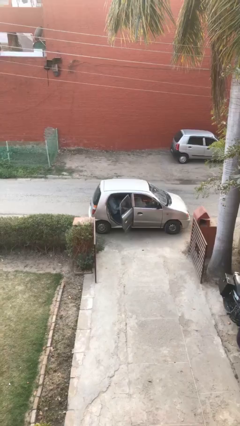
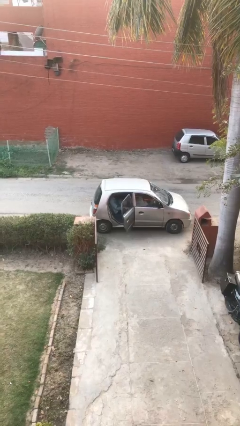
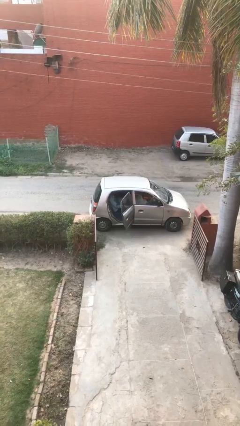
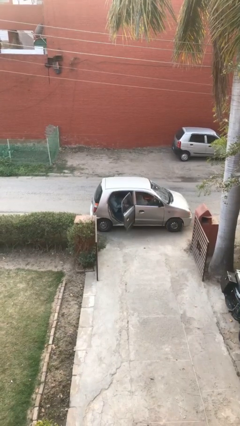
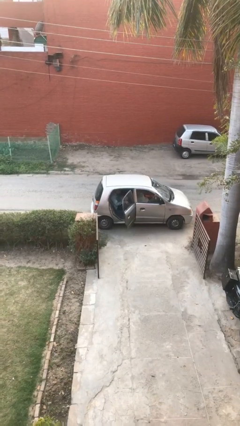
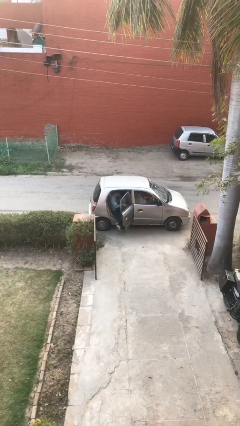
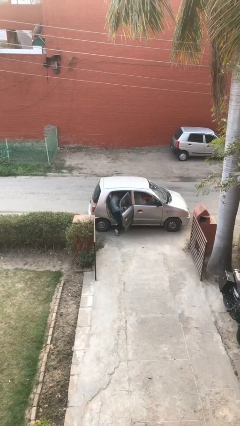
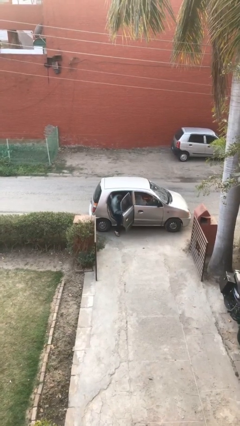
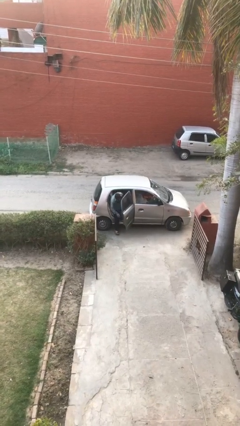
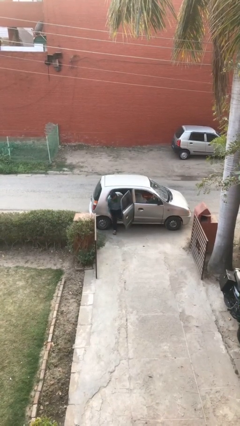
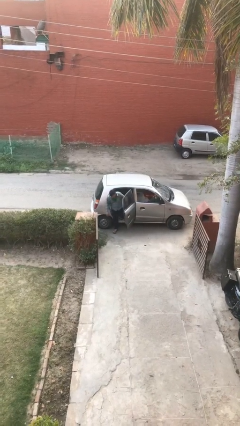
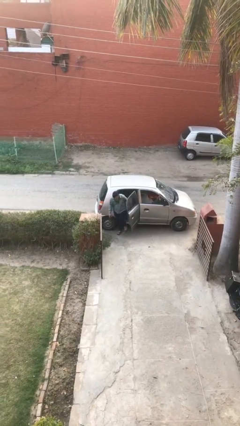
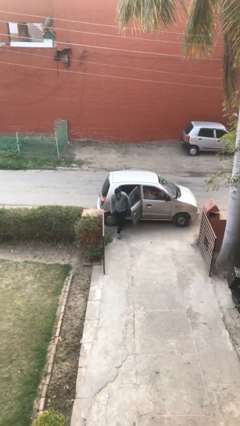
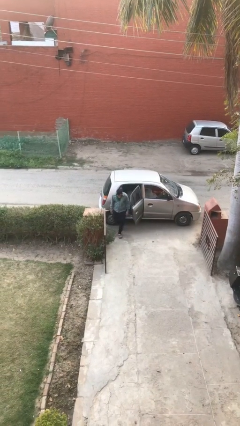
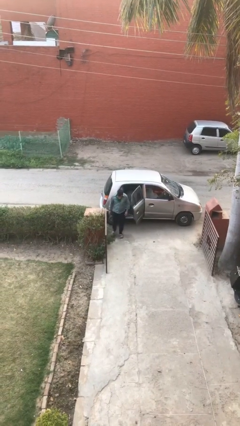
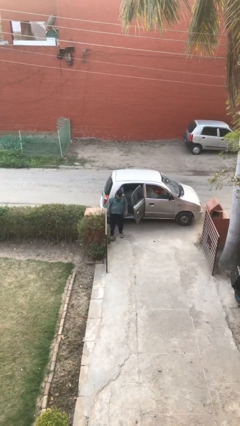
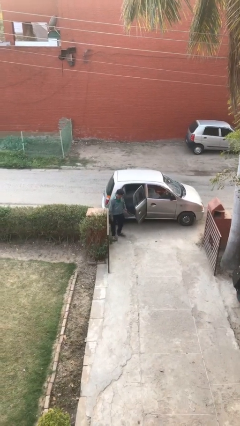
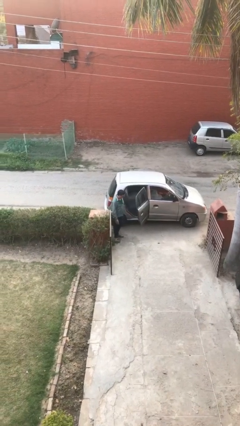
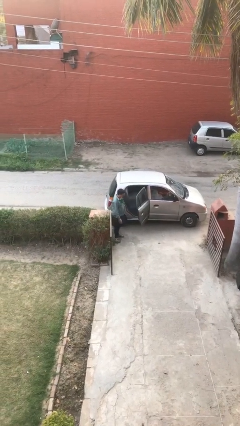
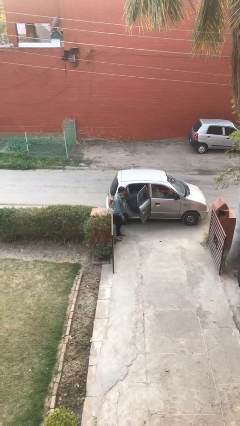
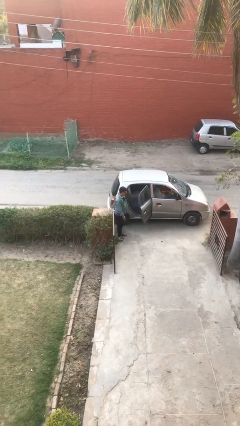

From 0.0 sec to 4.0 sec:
person exits car

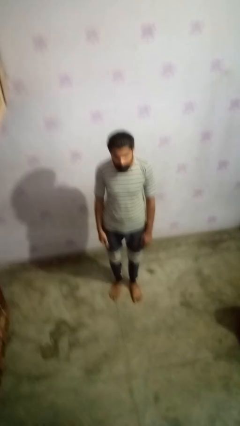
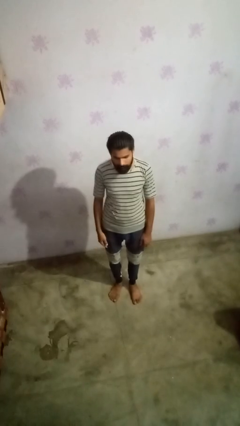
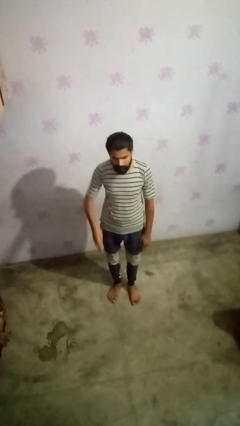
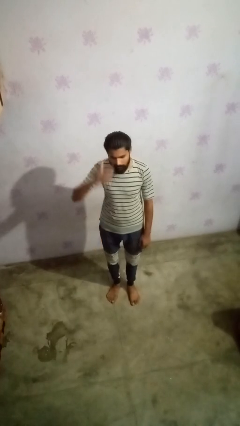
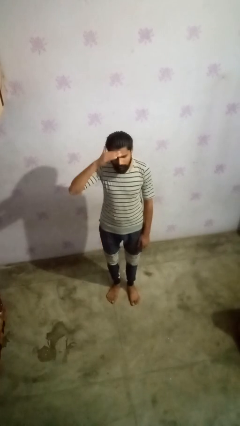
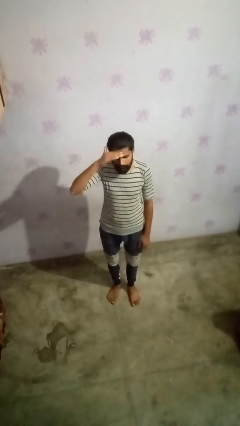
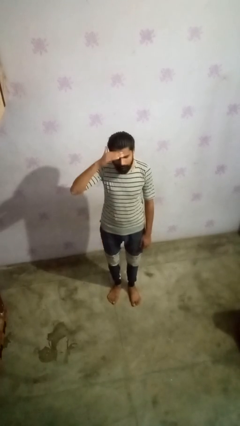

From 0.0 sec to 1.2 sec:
person salutes

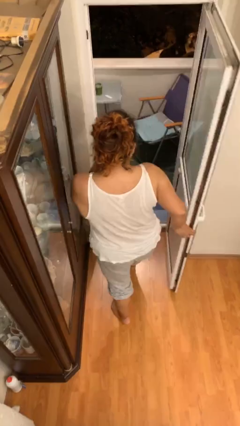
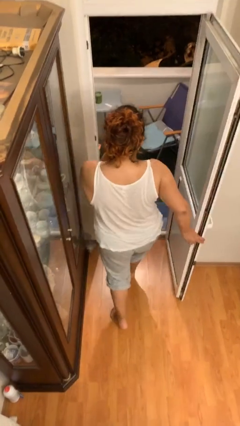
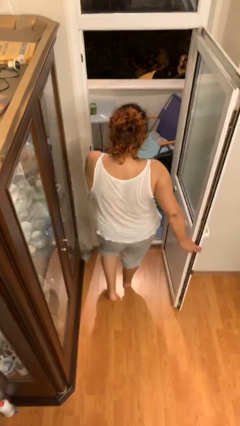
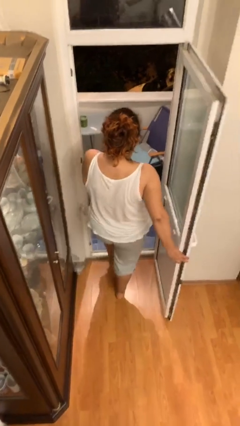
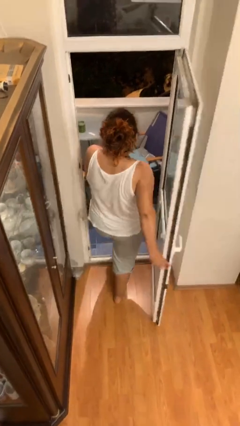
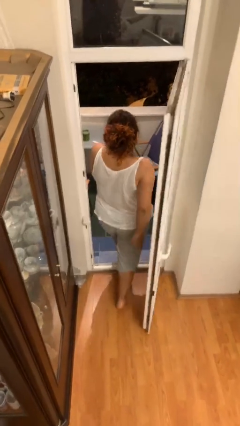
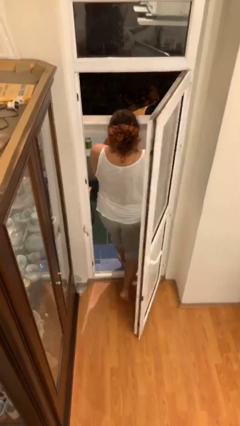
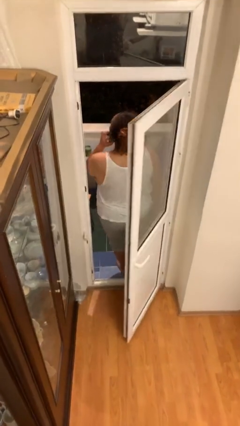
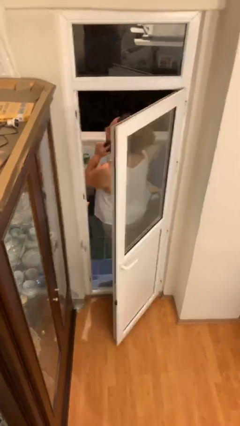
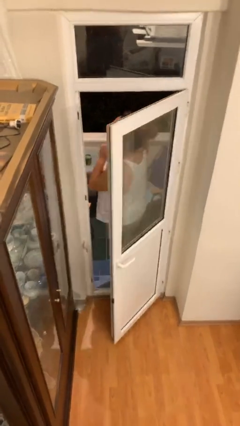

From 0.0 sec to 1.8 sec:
person exits scene through structure

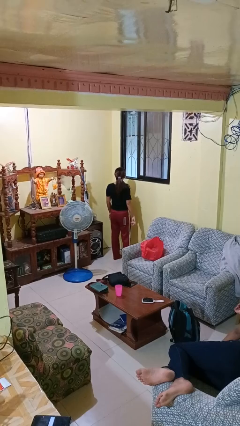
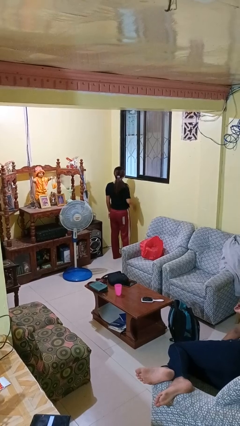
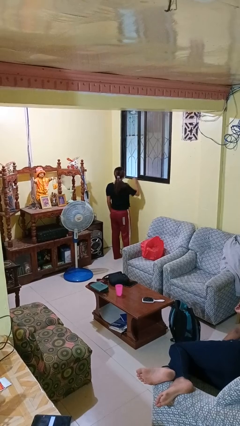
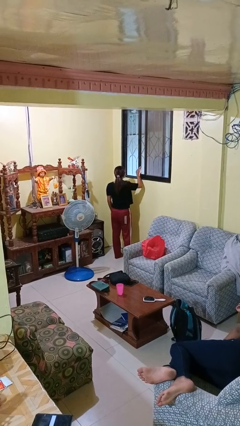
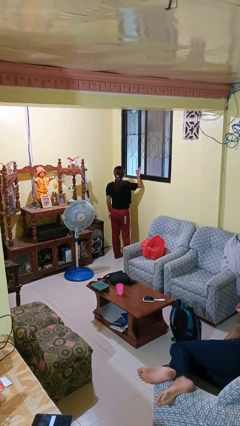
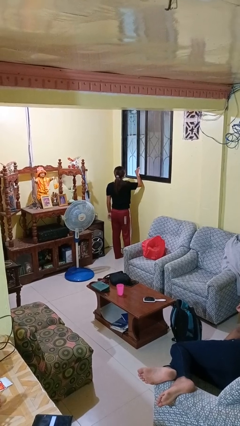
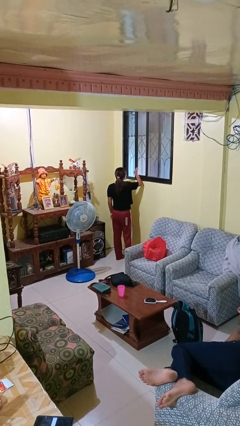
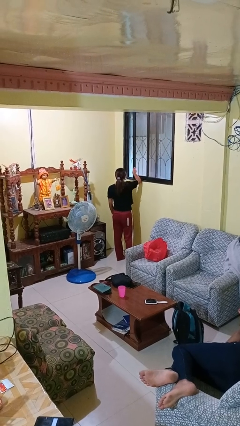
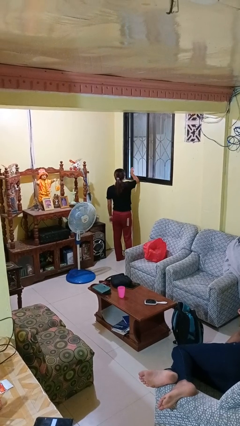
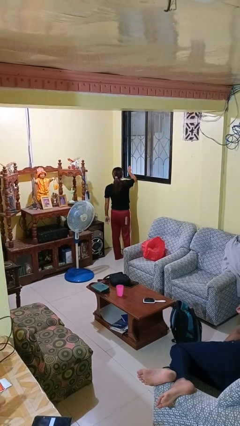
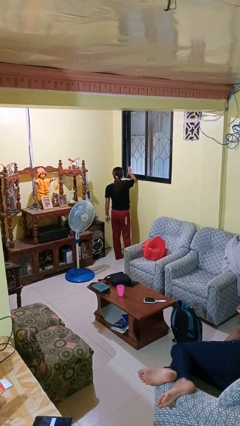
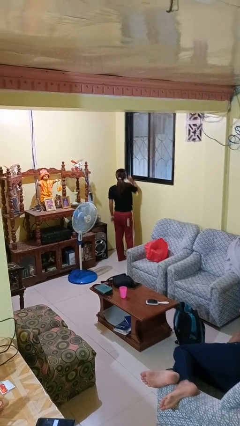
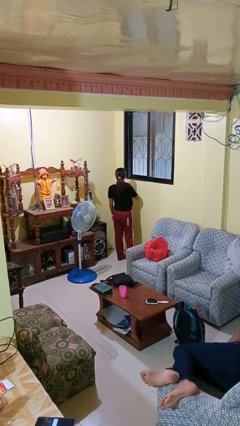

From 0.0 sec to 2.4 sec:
person closes home window

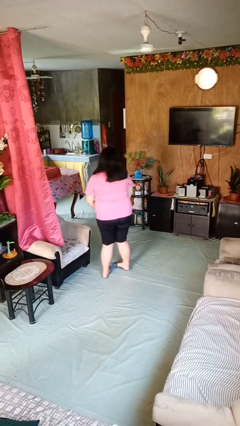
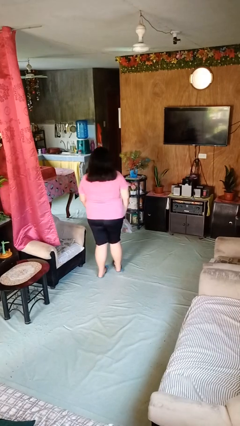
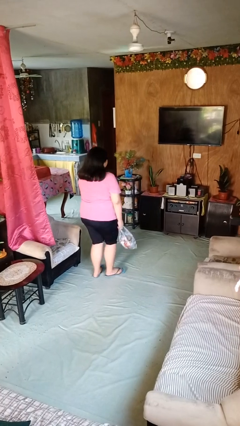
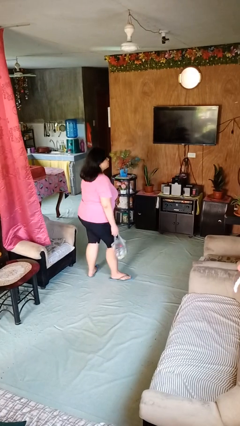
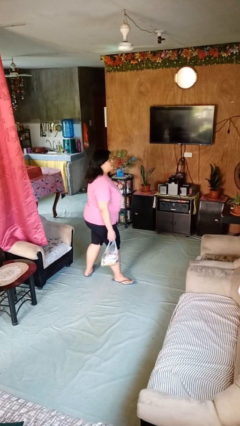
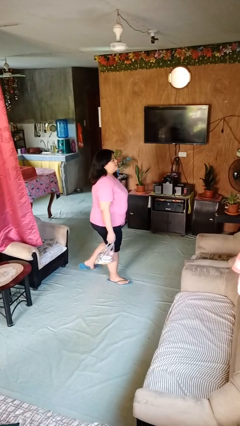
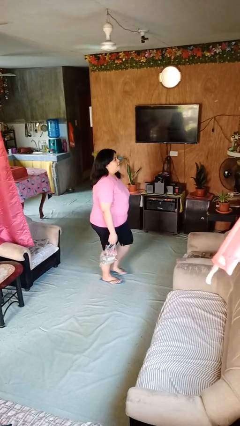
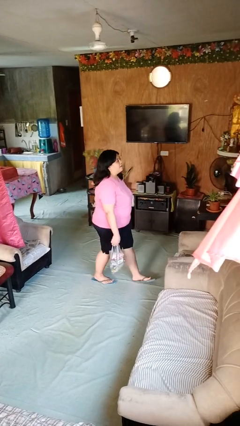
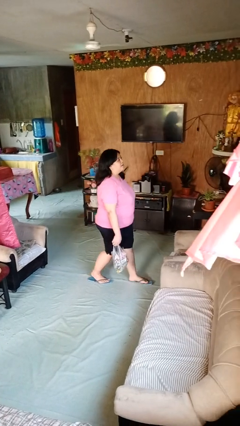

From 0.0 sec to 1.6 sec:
person carries groceries

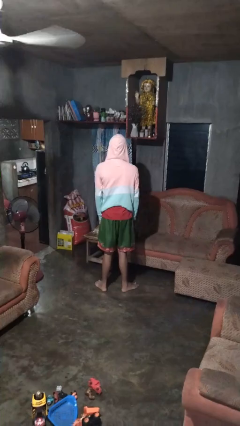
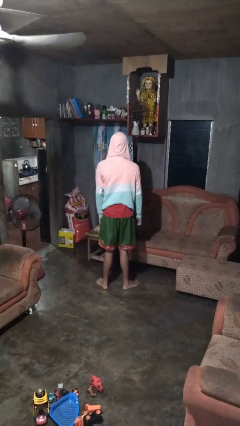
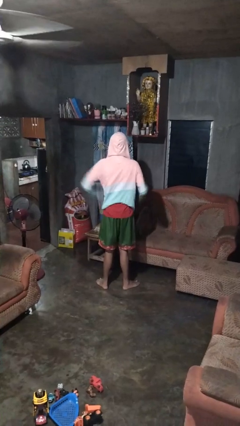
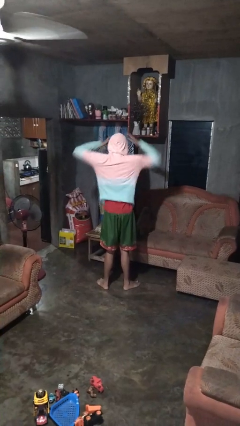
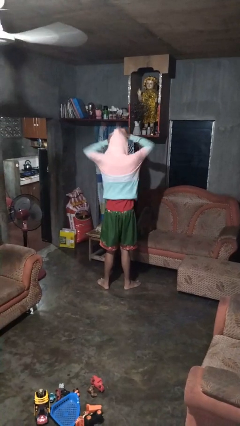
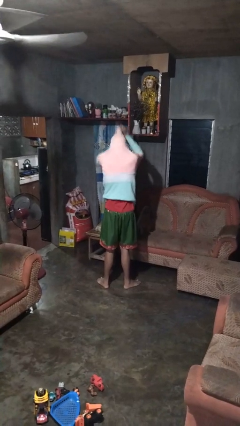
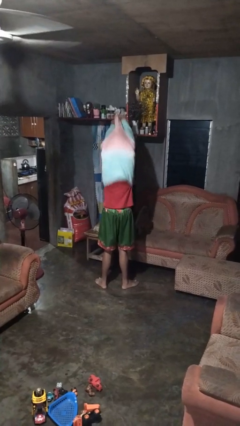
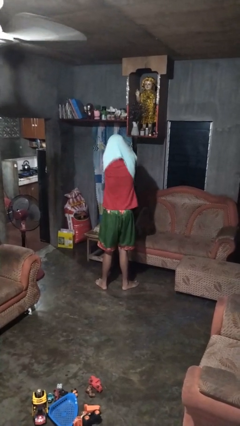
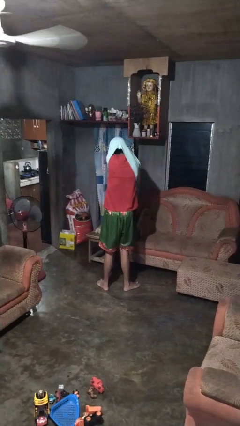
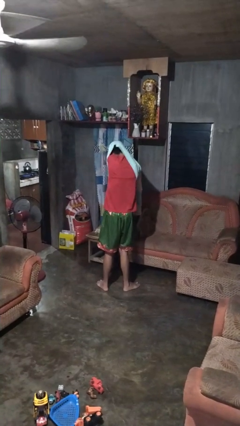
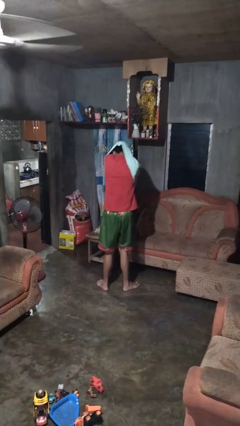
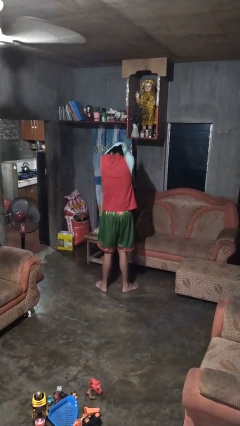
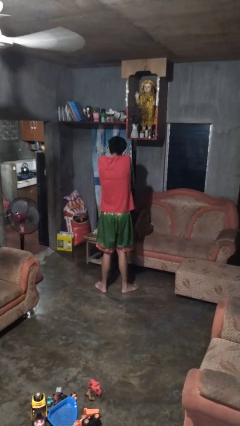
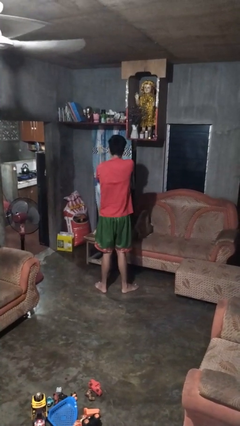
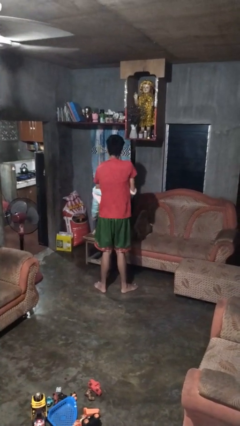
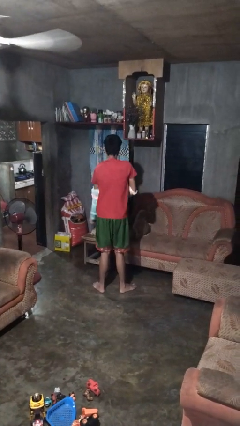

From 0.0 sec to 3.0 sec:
person takes off hoodie

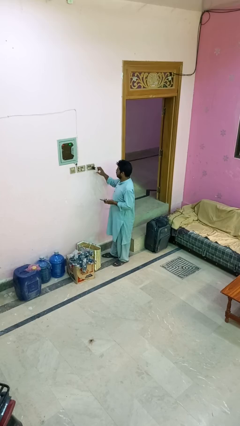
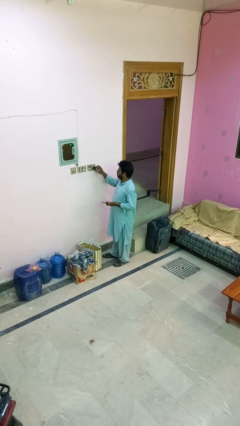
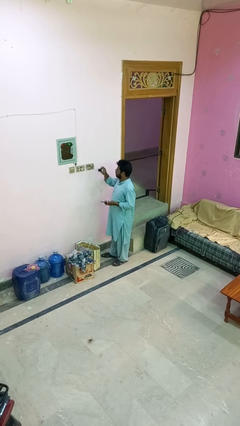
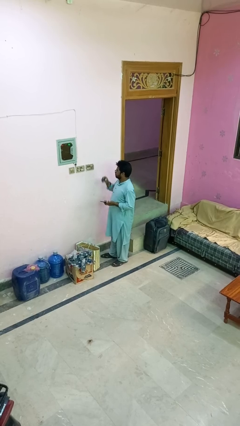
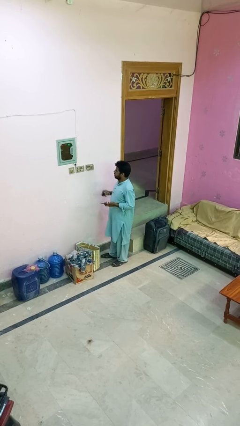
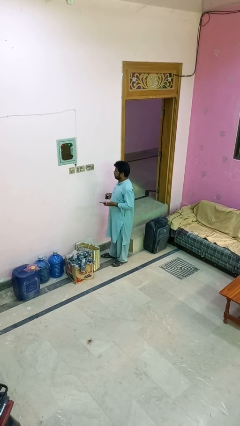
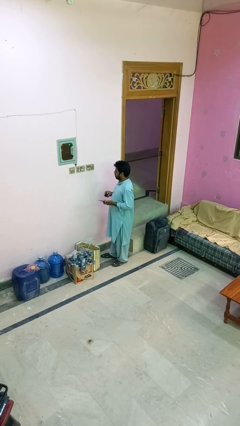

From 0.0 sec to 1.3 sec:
person unplugs from electrical socket

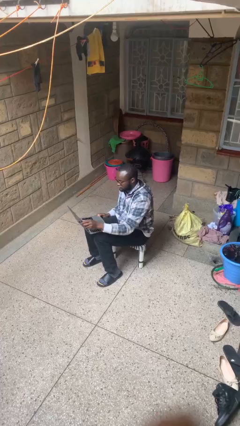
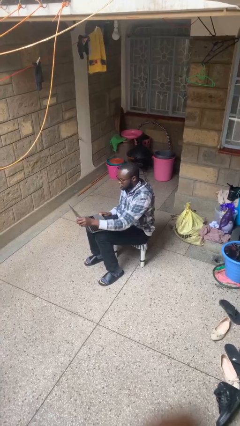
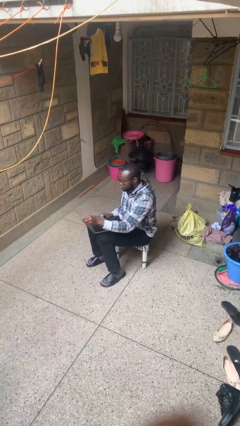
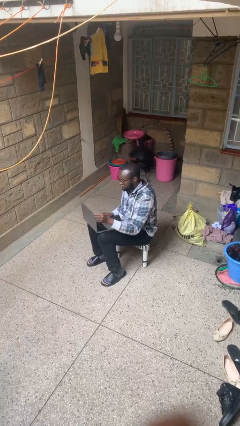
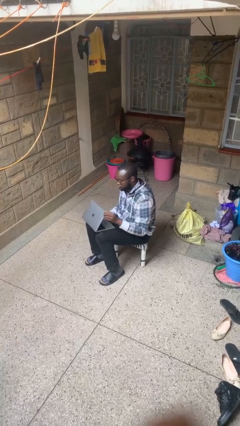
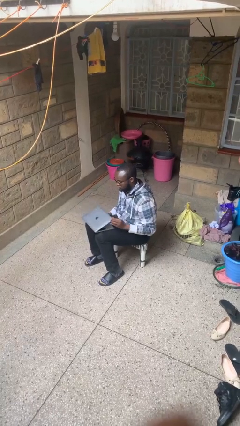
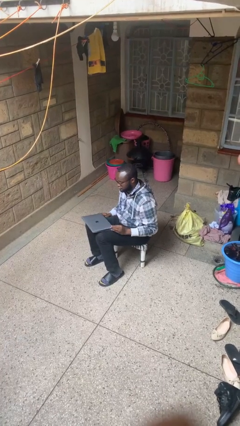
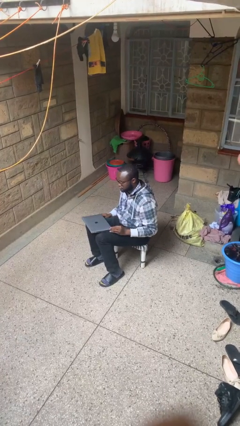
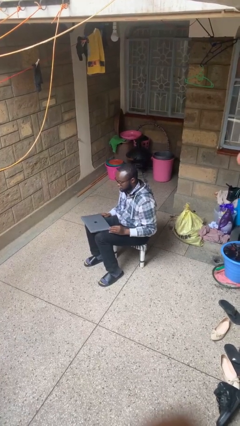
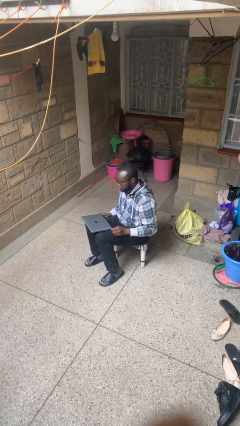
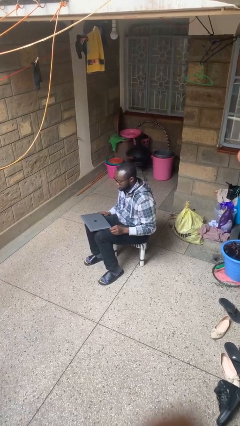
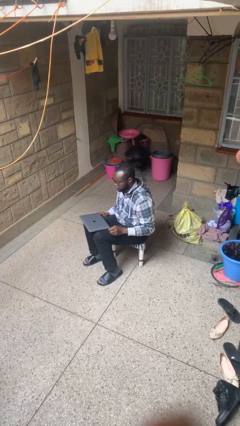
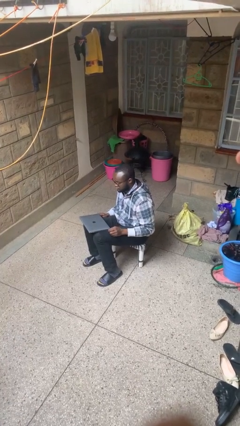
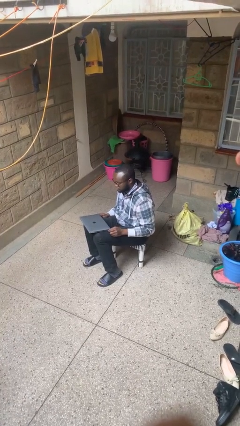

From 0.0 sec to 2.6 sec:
person closes laptop
